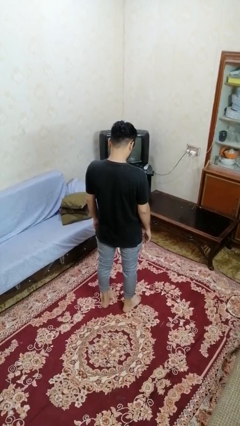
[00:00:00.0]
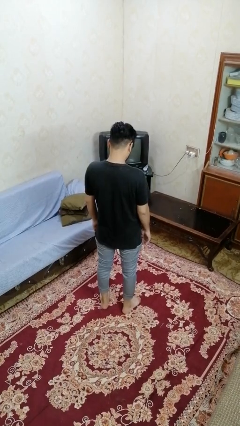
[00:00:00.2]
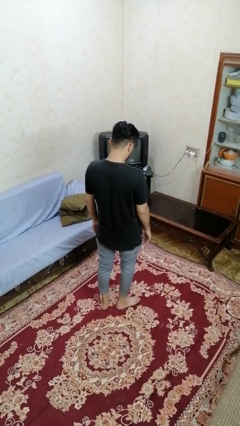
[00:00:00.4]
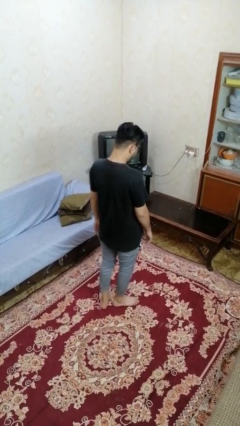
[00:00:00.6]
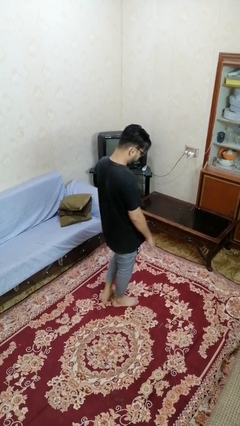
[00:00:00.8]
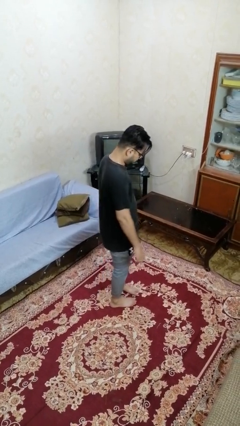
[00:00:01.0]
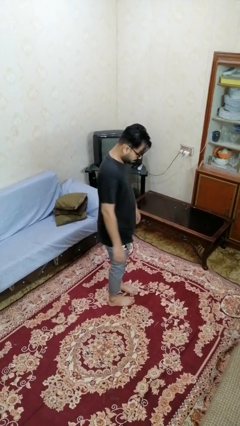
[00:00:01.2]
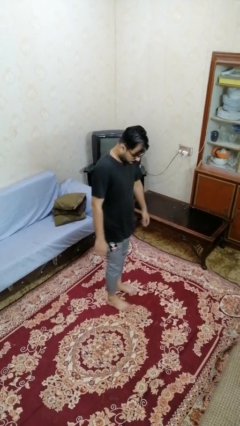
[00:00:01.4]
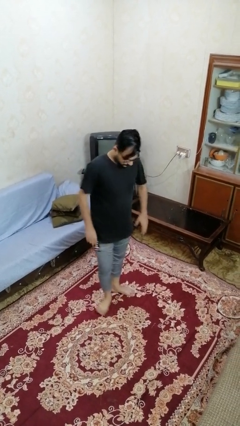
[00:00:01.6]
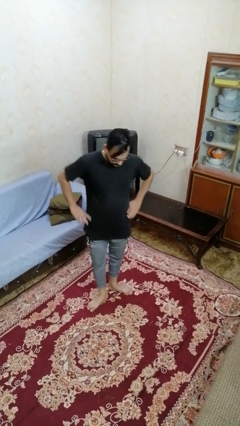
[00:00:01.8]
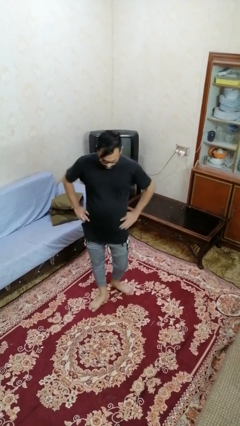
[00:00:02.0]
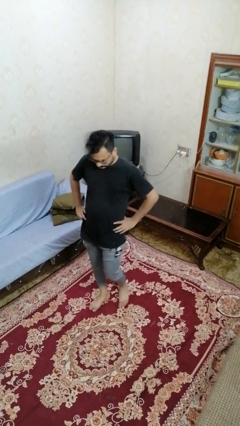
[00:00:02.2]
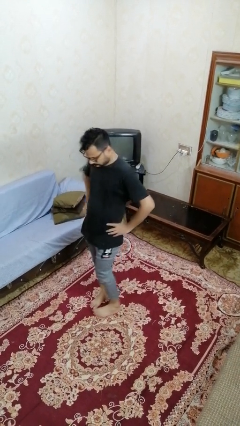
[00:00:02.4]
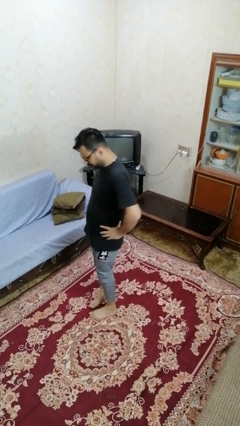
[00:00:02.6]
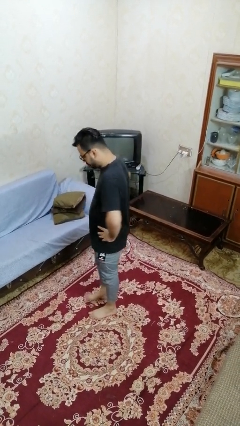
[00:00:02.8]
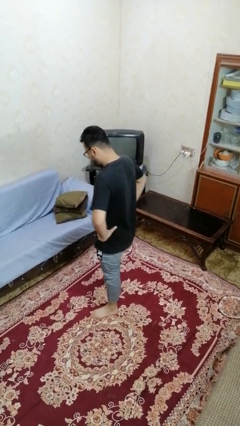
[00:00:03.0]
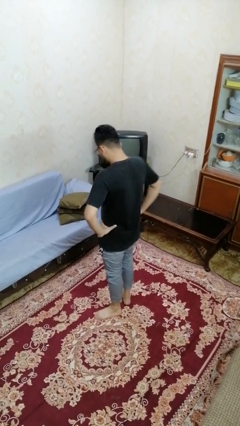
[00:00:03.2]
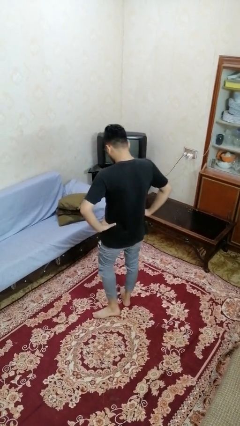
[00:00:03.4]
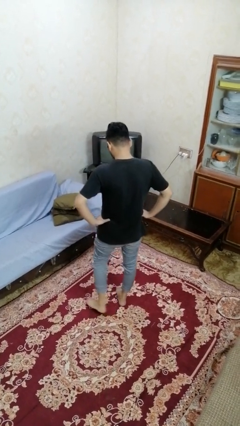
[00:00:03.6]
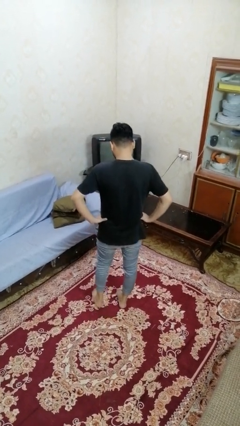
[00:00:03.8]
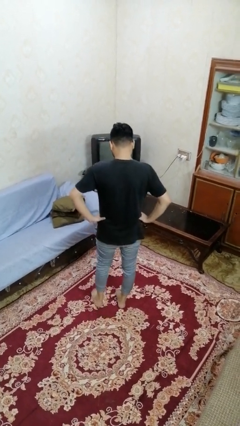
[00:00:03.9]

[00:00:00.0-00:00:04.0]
person twirls

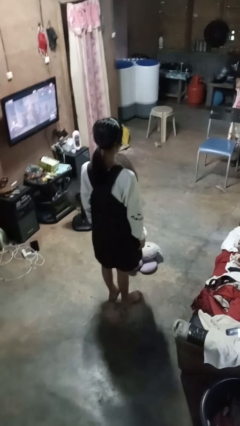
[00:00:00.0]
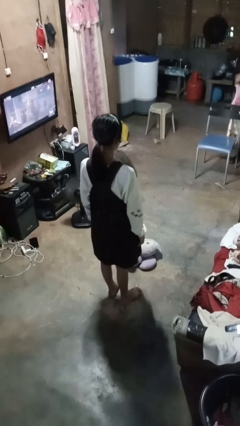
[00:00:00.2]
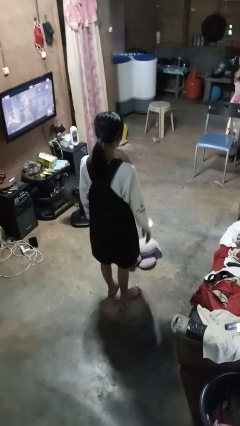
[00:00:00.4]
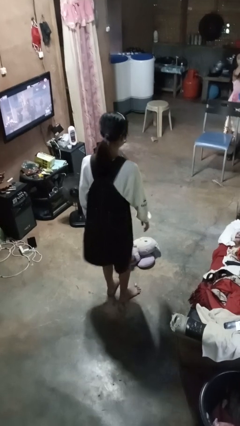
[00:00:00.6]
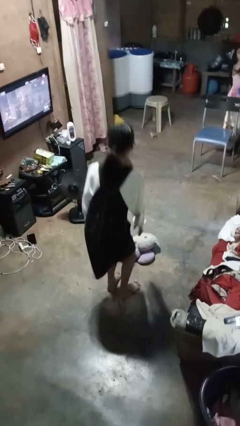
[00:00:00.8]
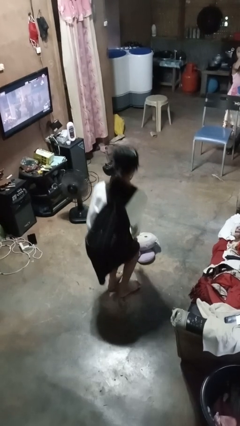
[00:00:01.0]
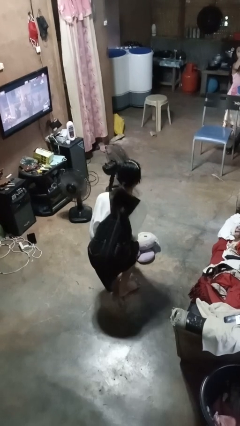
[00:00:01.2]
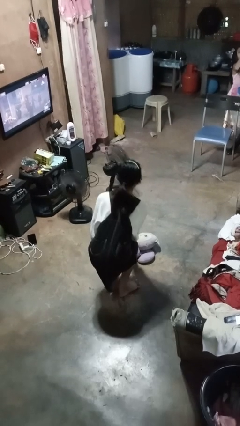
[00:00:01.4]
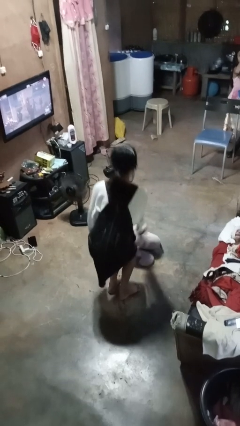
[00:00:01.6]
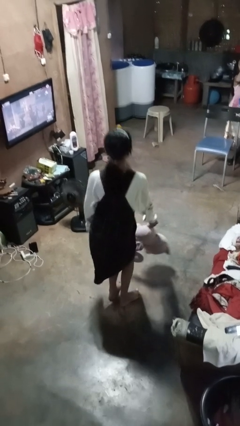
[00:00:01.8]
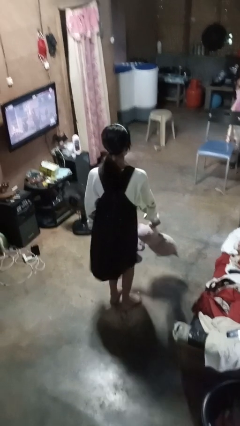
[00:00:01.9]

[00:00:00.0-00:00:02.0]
person picks up object from floor

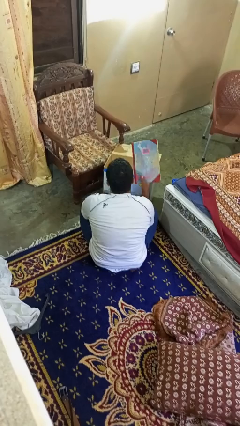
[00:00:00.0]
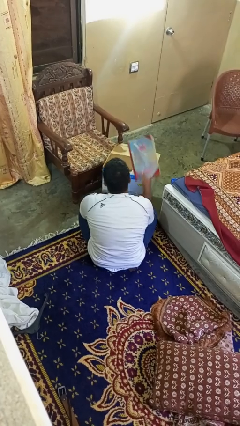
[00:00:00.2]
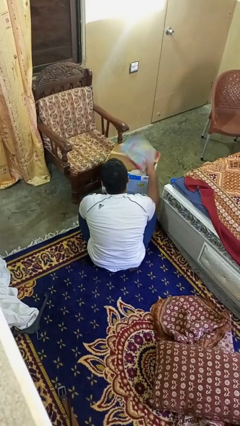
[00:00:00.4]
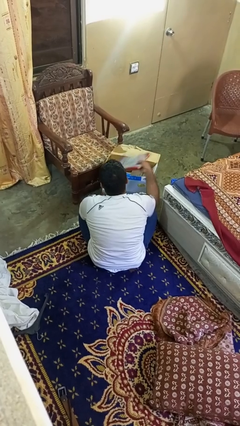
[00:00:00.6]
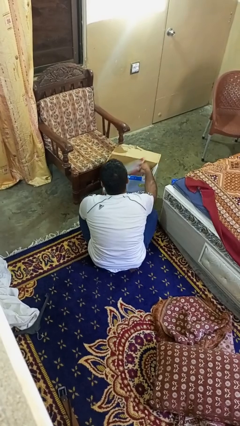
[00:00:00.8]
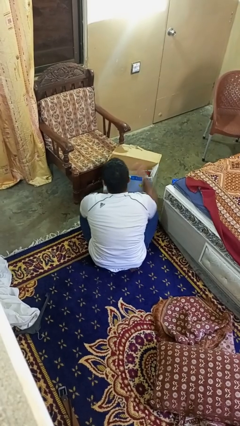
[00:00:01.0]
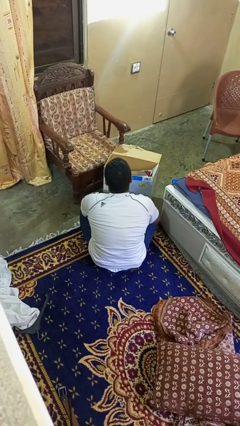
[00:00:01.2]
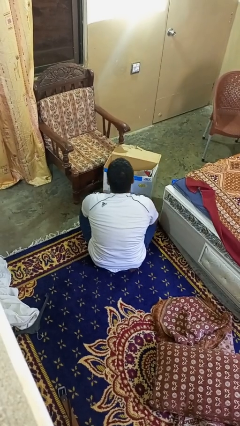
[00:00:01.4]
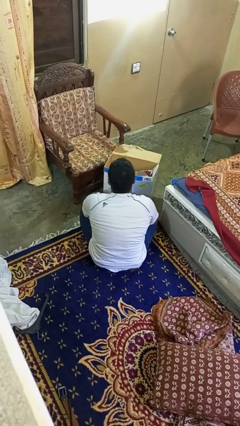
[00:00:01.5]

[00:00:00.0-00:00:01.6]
person puts object into box

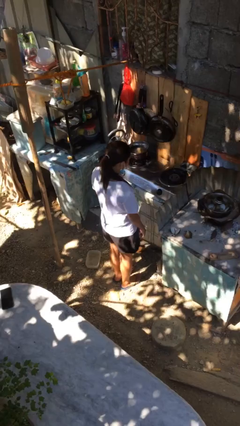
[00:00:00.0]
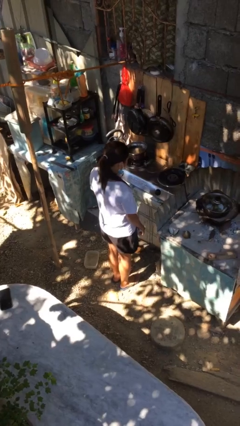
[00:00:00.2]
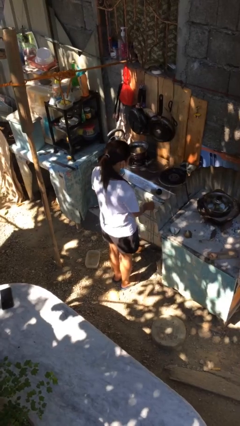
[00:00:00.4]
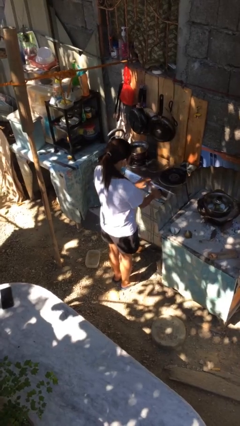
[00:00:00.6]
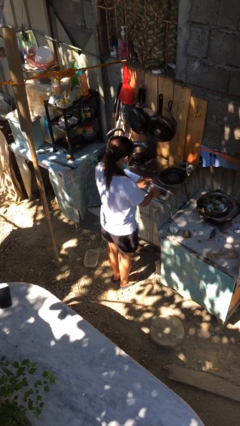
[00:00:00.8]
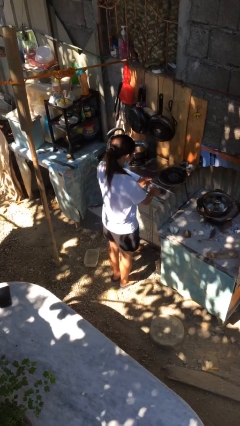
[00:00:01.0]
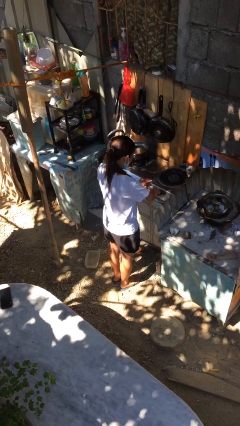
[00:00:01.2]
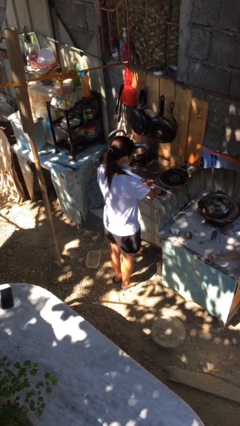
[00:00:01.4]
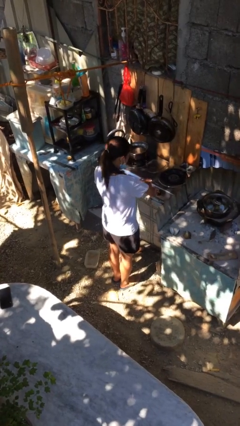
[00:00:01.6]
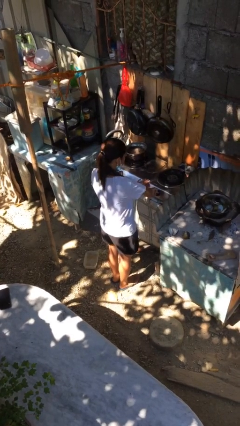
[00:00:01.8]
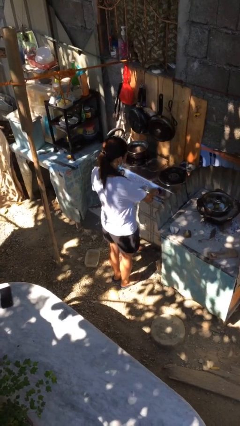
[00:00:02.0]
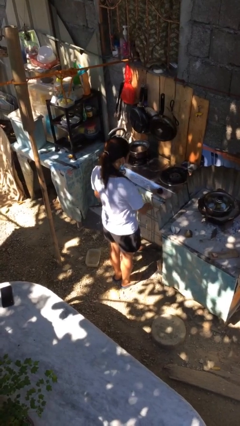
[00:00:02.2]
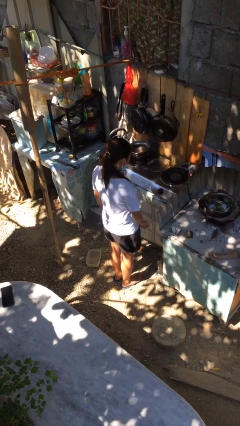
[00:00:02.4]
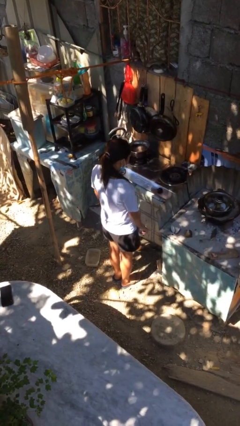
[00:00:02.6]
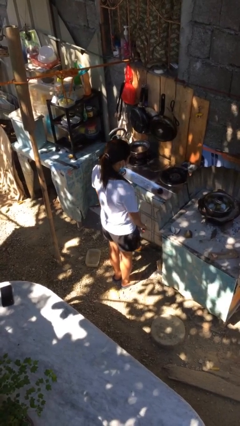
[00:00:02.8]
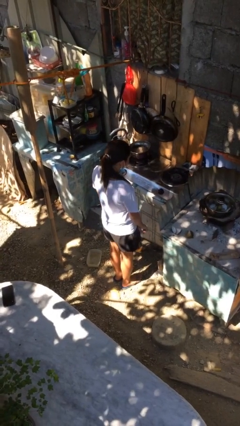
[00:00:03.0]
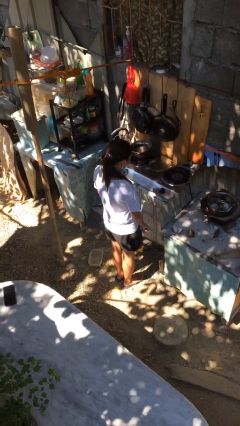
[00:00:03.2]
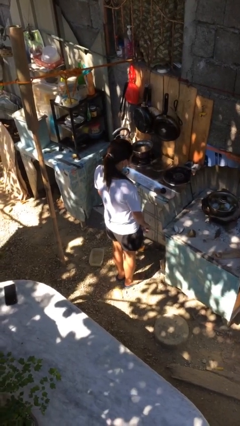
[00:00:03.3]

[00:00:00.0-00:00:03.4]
person turns on stovetop

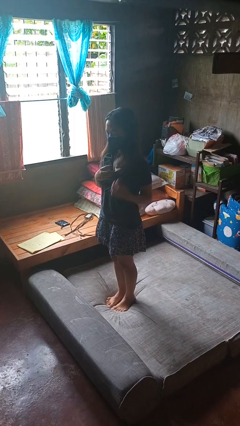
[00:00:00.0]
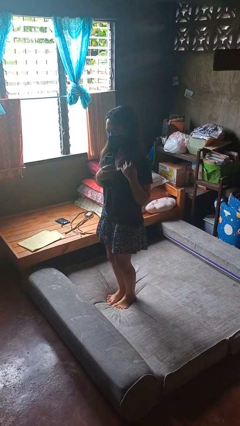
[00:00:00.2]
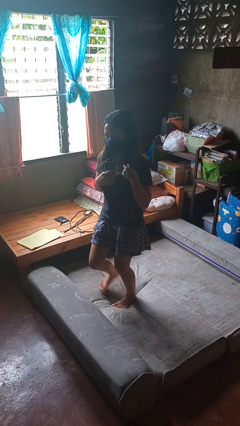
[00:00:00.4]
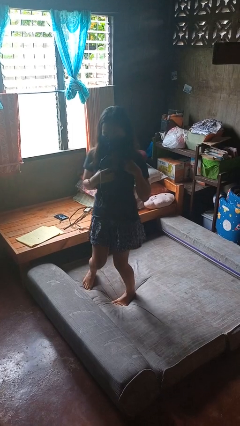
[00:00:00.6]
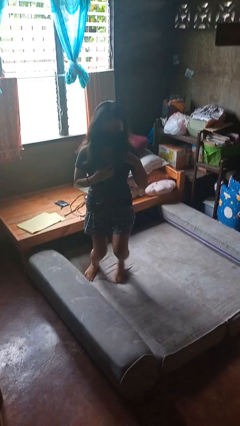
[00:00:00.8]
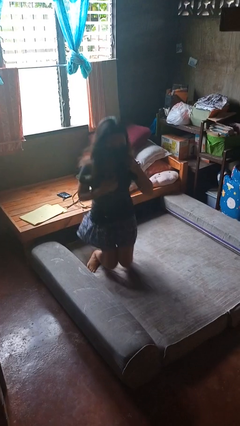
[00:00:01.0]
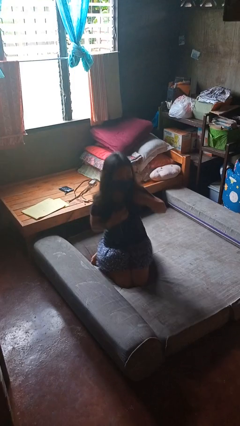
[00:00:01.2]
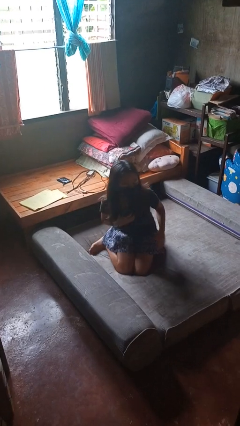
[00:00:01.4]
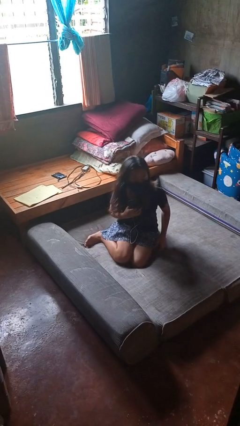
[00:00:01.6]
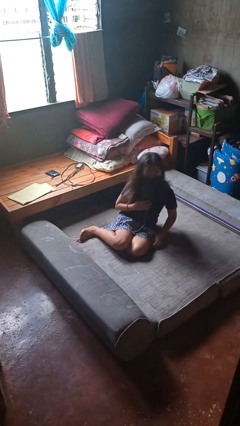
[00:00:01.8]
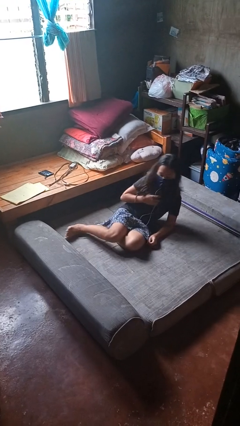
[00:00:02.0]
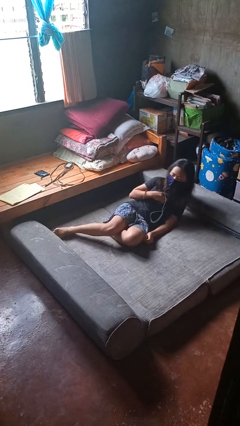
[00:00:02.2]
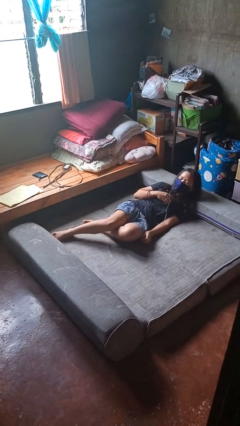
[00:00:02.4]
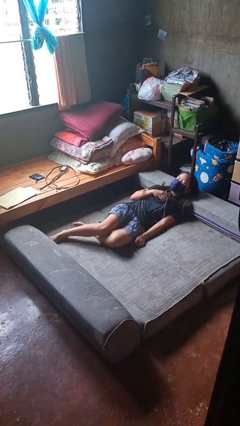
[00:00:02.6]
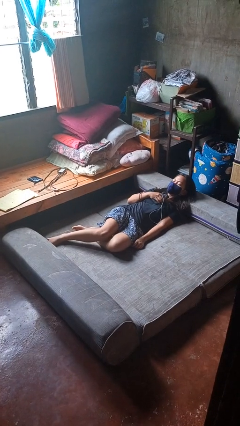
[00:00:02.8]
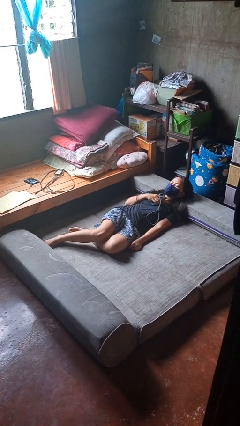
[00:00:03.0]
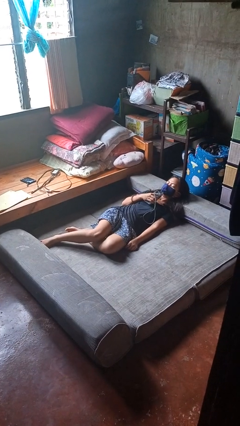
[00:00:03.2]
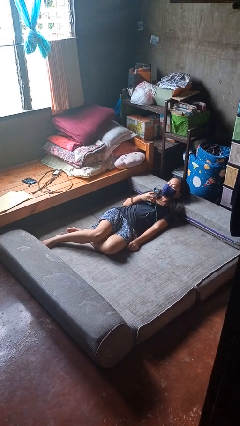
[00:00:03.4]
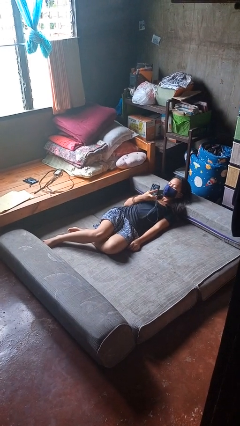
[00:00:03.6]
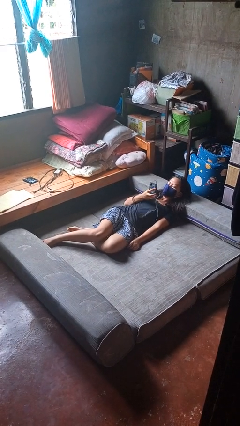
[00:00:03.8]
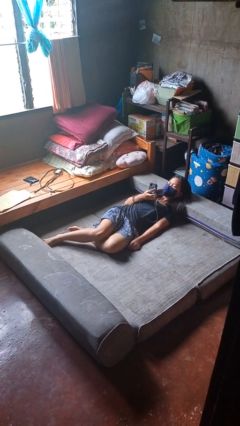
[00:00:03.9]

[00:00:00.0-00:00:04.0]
person lies down on bed

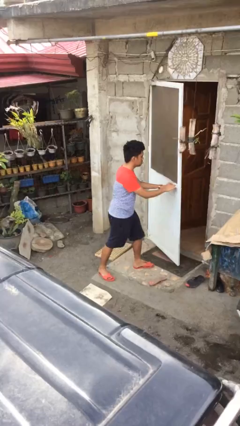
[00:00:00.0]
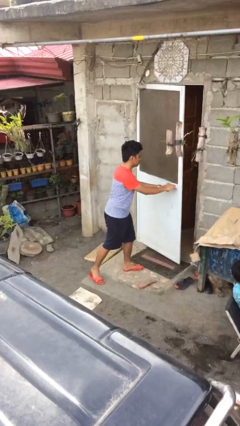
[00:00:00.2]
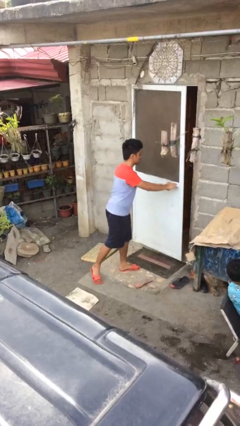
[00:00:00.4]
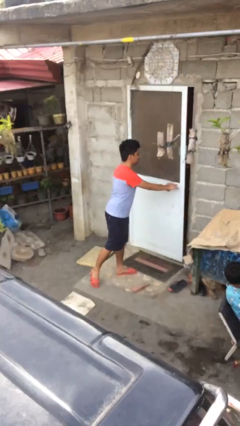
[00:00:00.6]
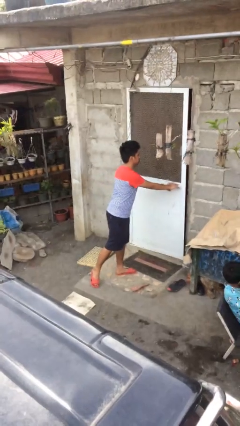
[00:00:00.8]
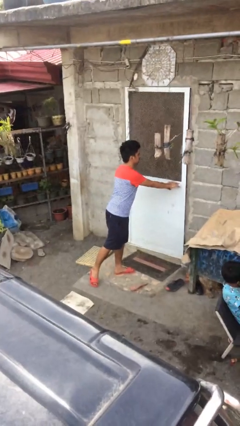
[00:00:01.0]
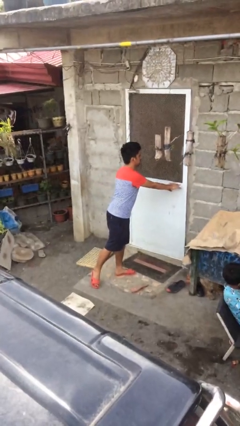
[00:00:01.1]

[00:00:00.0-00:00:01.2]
person closes facility door

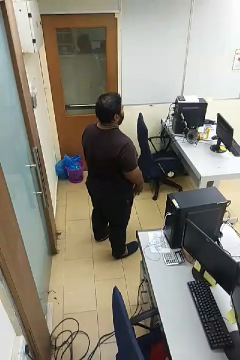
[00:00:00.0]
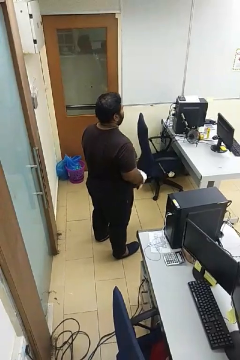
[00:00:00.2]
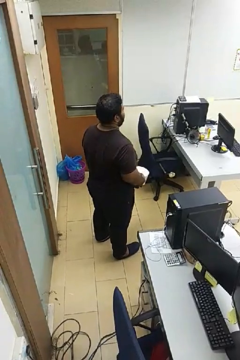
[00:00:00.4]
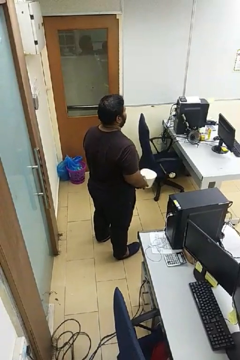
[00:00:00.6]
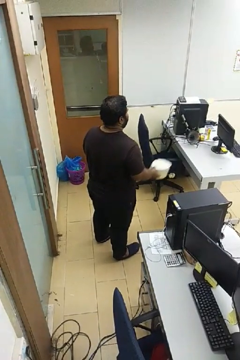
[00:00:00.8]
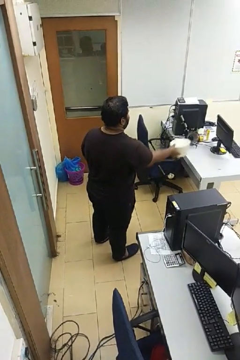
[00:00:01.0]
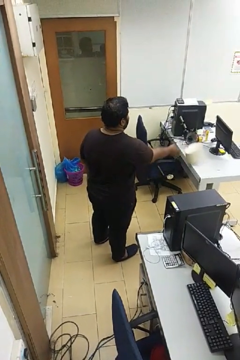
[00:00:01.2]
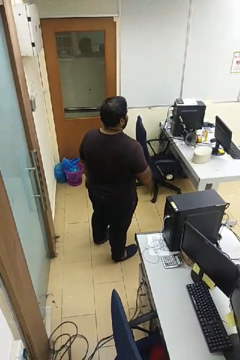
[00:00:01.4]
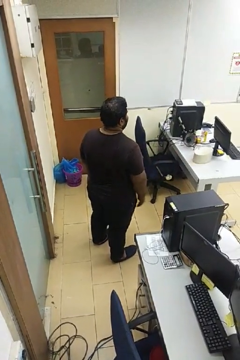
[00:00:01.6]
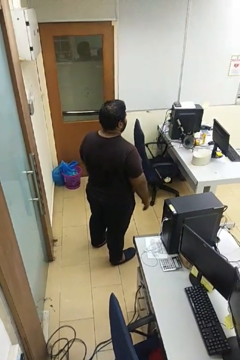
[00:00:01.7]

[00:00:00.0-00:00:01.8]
person throws object on table
